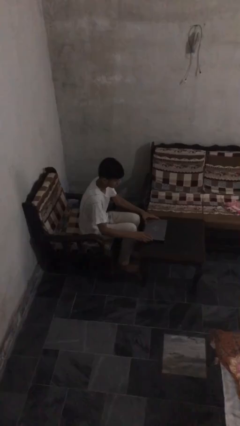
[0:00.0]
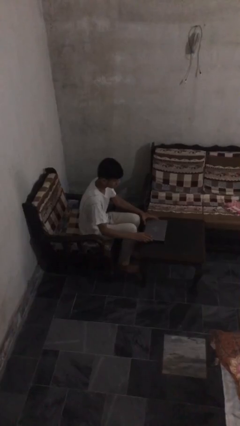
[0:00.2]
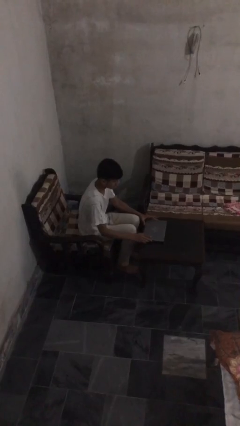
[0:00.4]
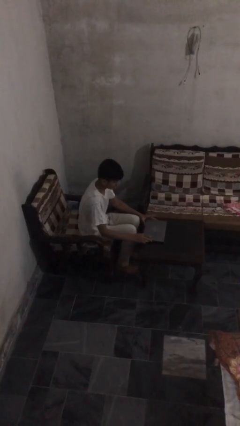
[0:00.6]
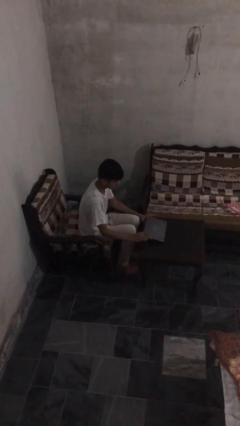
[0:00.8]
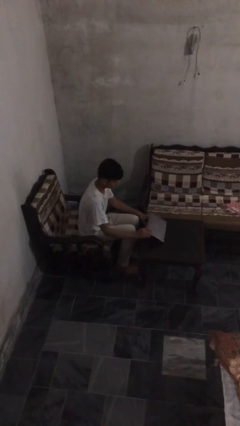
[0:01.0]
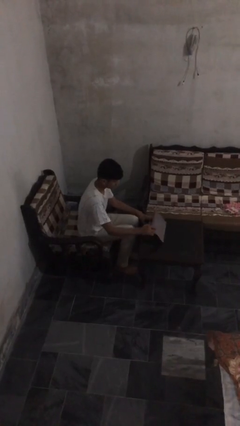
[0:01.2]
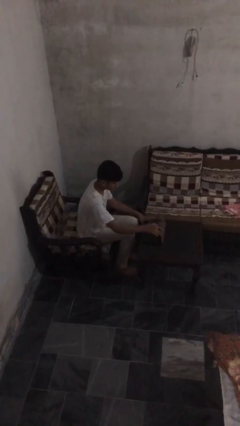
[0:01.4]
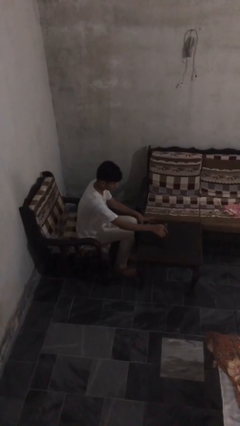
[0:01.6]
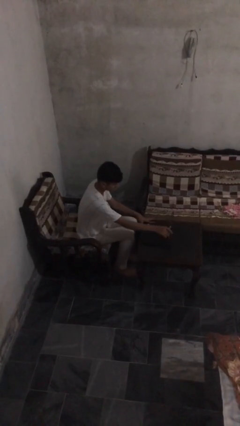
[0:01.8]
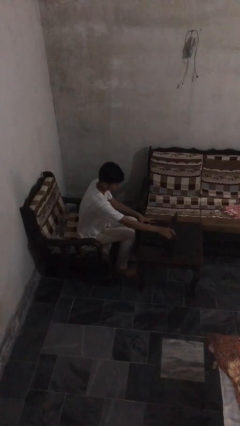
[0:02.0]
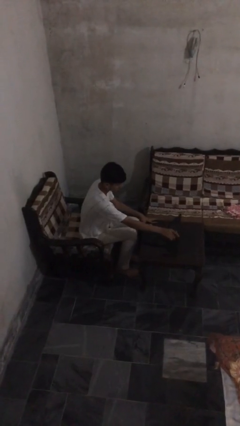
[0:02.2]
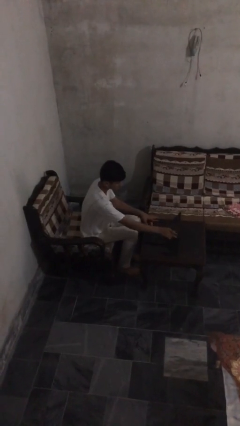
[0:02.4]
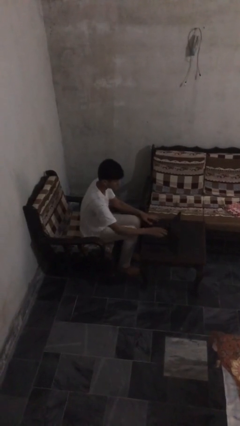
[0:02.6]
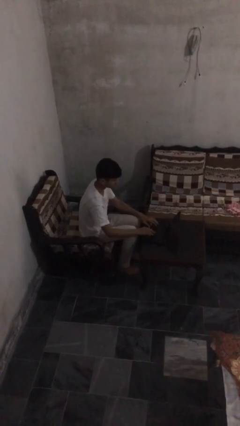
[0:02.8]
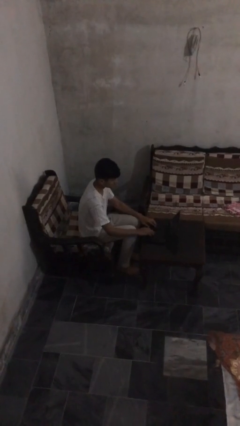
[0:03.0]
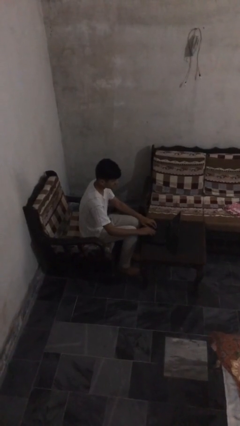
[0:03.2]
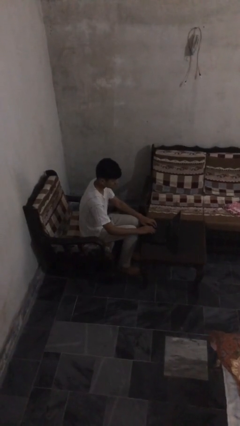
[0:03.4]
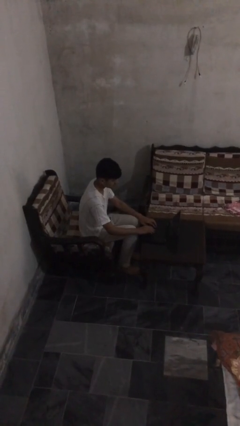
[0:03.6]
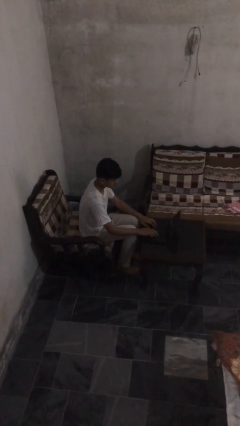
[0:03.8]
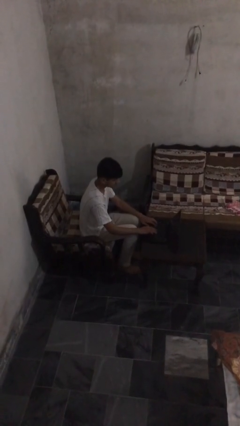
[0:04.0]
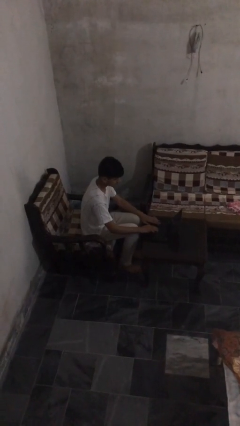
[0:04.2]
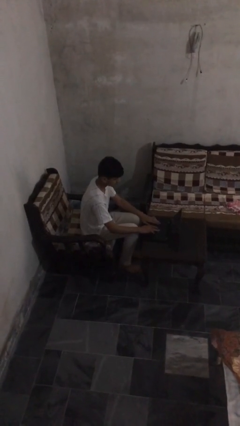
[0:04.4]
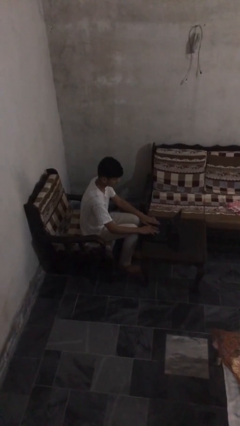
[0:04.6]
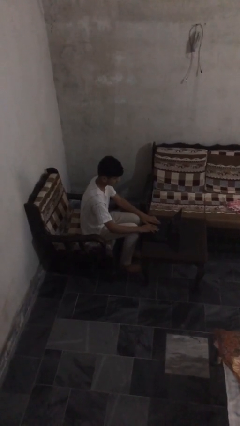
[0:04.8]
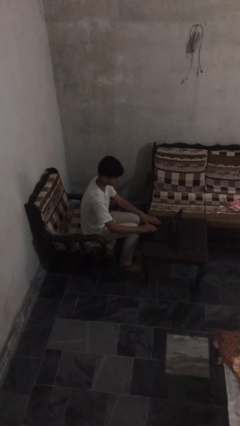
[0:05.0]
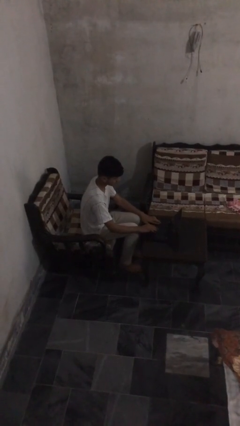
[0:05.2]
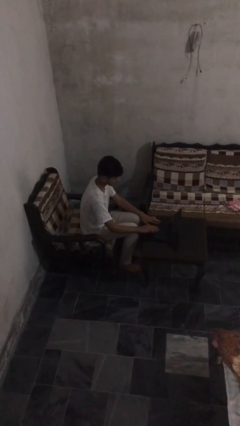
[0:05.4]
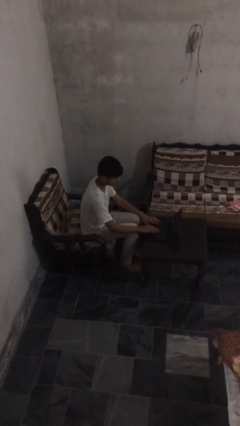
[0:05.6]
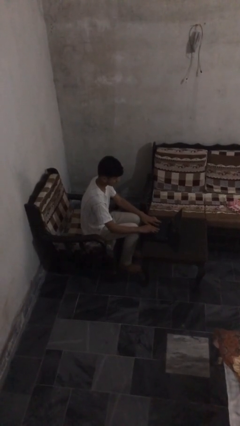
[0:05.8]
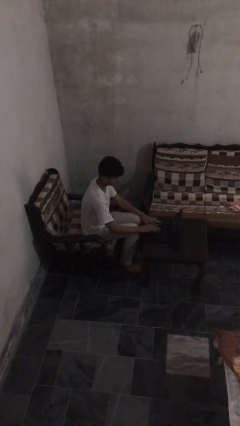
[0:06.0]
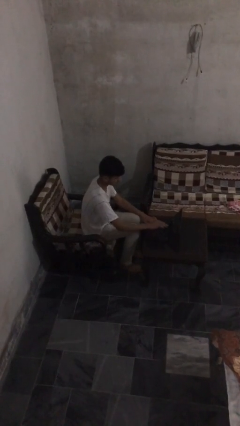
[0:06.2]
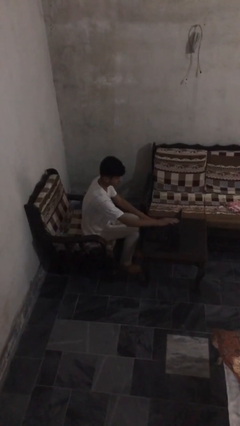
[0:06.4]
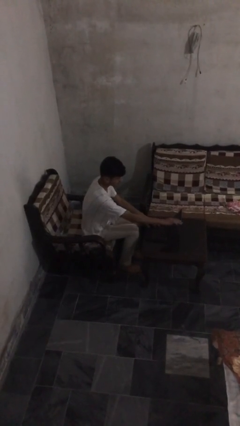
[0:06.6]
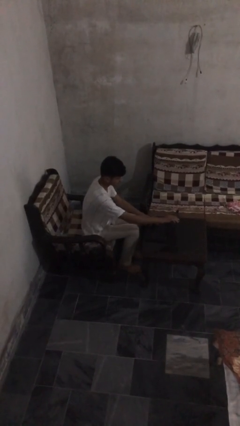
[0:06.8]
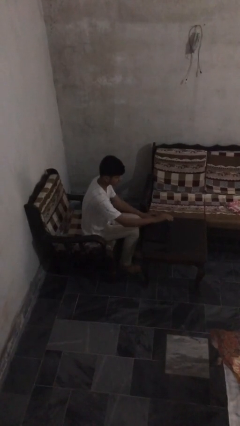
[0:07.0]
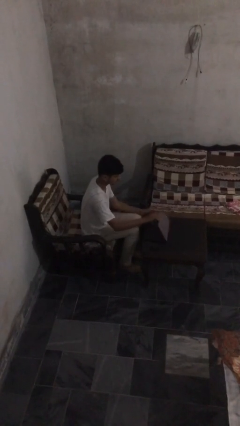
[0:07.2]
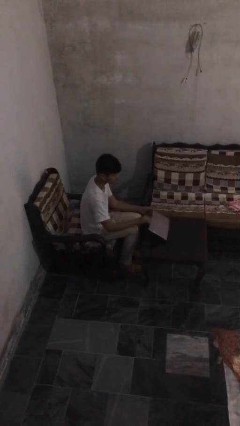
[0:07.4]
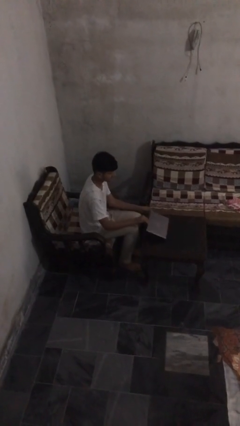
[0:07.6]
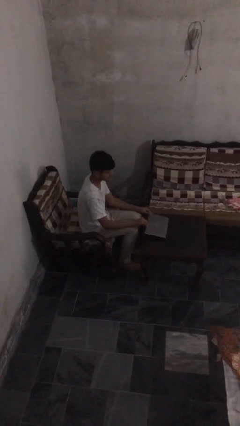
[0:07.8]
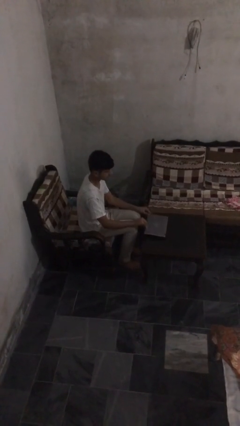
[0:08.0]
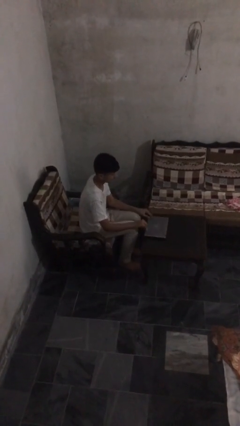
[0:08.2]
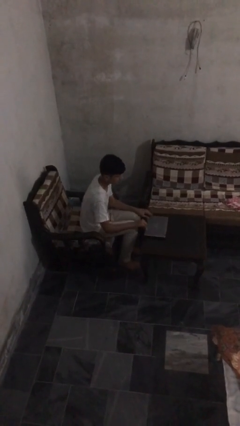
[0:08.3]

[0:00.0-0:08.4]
person interacts with laptop

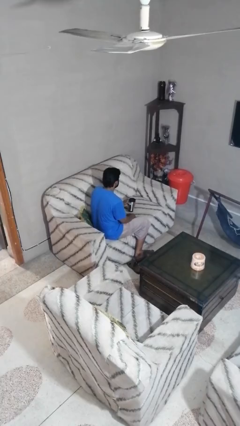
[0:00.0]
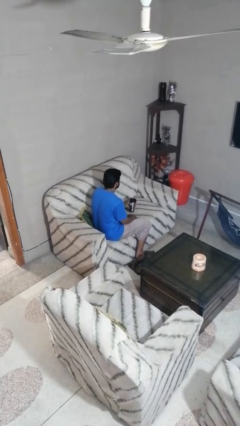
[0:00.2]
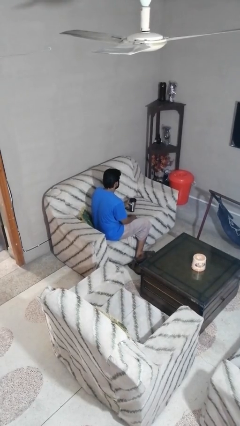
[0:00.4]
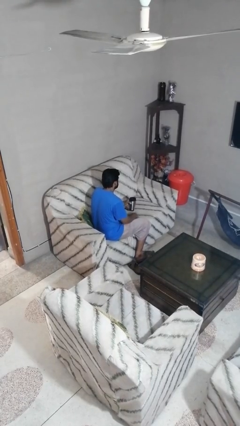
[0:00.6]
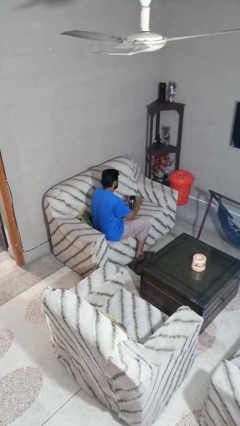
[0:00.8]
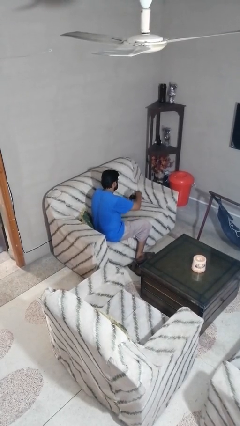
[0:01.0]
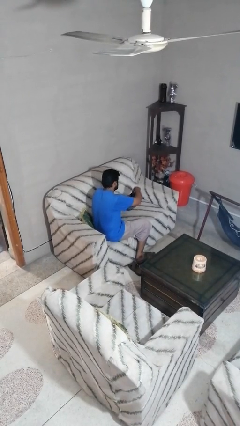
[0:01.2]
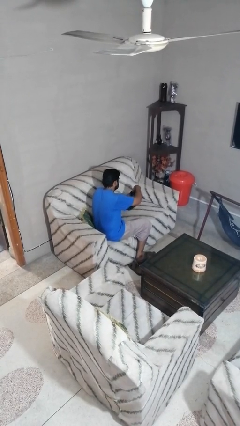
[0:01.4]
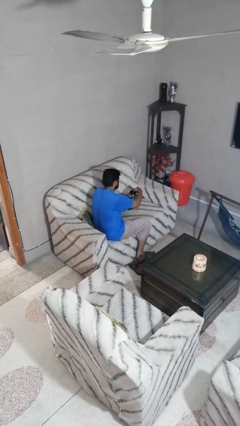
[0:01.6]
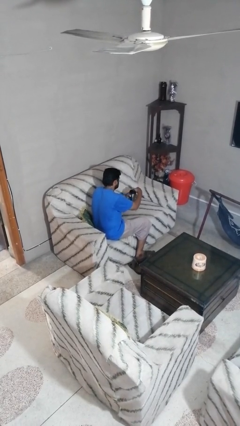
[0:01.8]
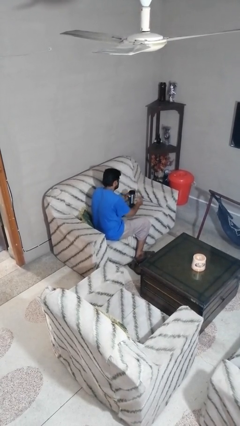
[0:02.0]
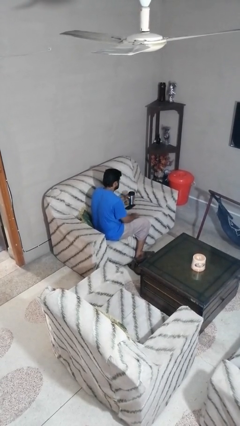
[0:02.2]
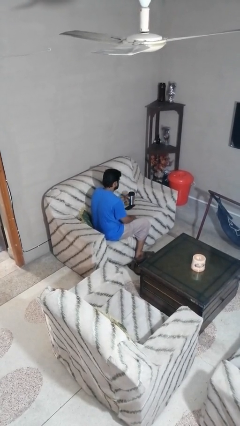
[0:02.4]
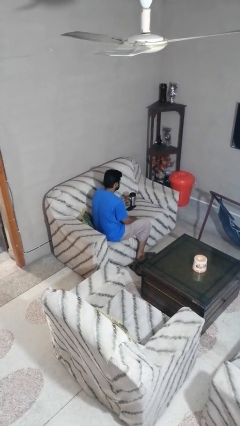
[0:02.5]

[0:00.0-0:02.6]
person opens beverage can

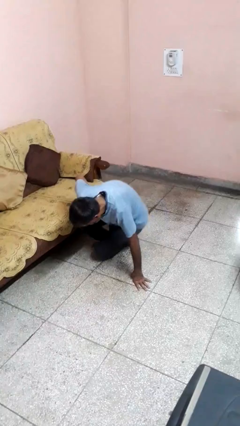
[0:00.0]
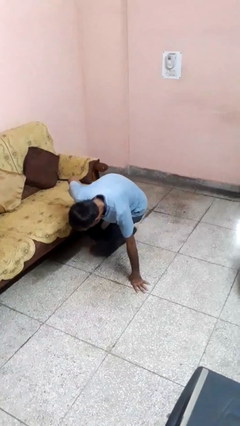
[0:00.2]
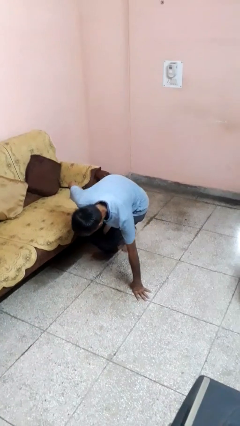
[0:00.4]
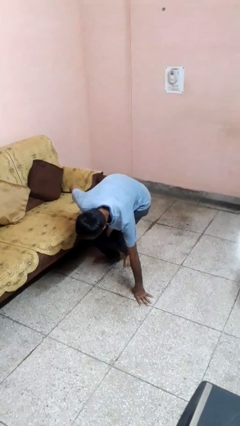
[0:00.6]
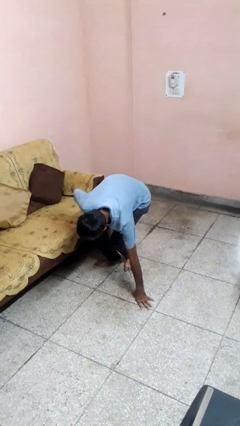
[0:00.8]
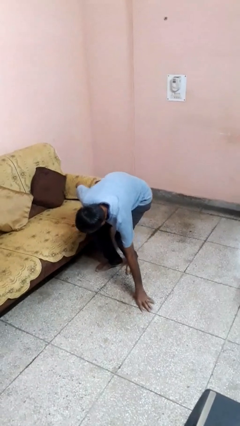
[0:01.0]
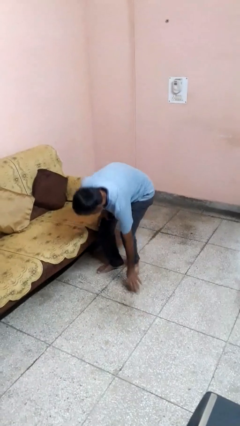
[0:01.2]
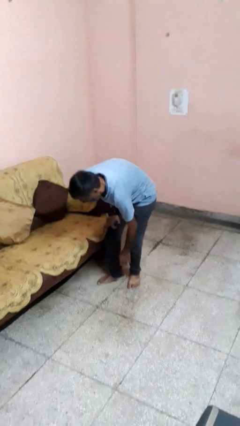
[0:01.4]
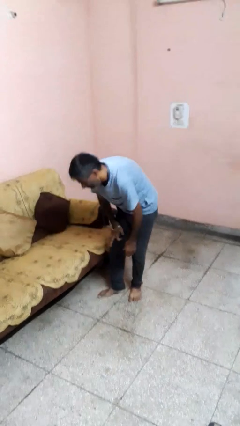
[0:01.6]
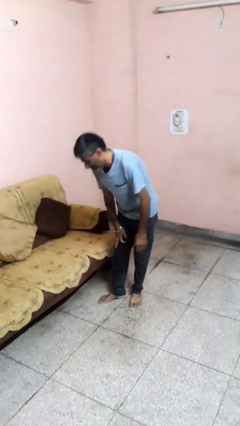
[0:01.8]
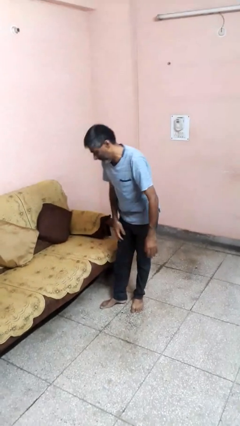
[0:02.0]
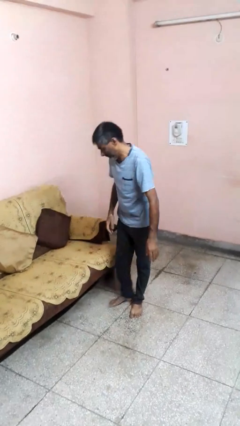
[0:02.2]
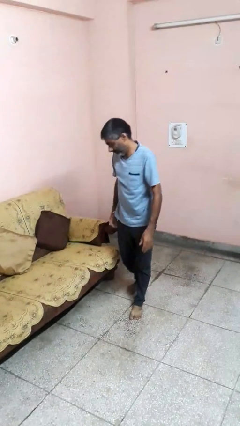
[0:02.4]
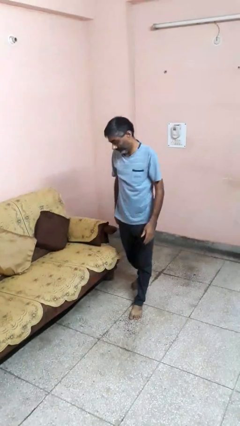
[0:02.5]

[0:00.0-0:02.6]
person stands up from floor

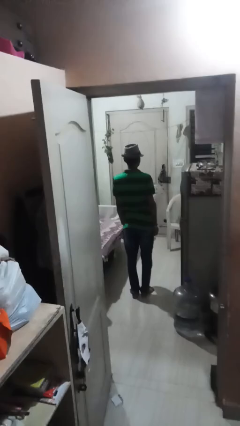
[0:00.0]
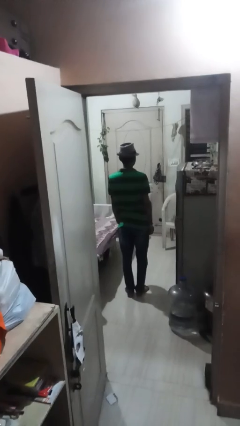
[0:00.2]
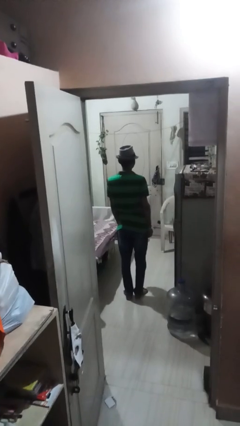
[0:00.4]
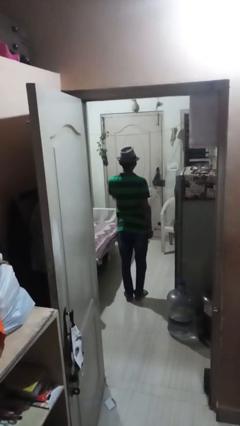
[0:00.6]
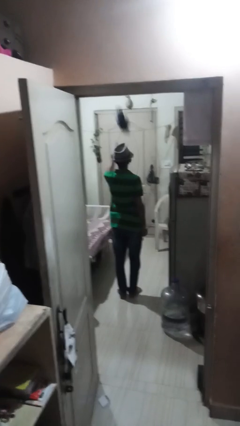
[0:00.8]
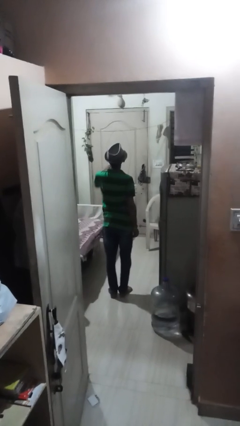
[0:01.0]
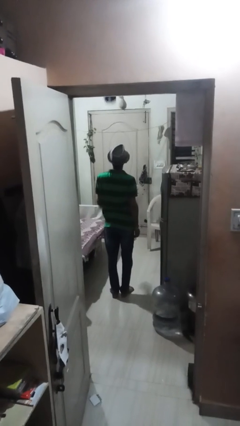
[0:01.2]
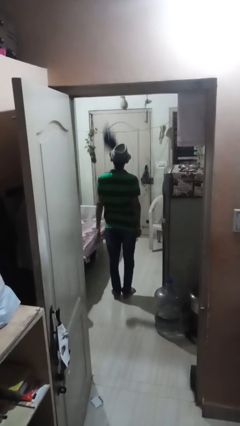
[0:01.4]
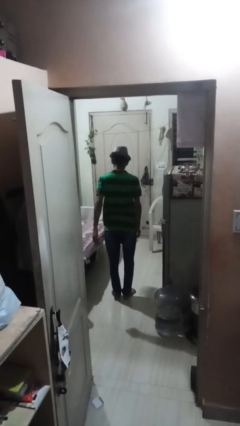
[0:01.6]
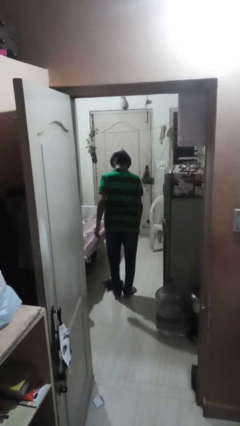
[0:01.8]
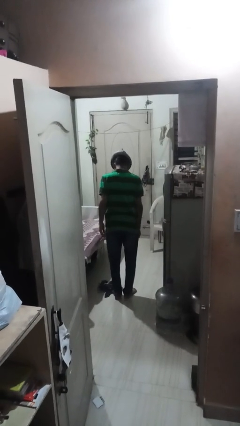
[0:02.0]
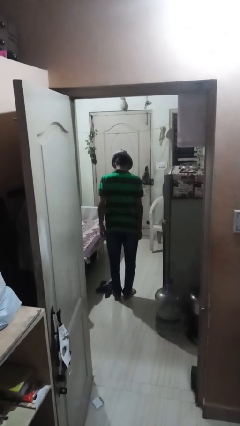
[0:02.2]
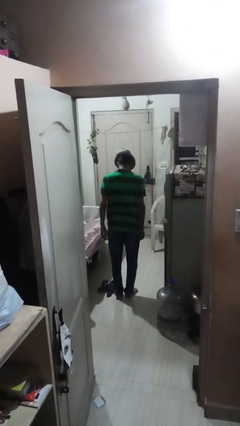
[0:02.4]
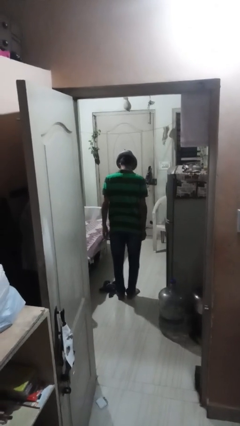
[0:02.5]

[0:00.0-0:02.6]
person throws object into air

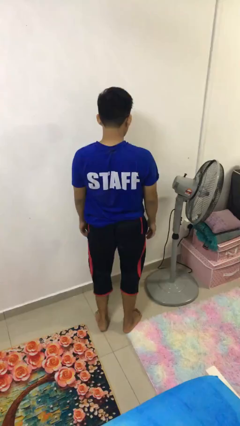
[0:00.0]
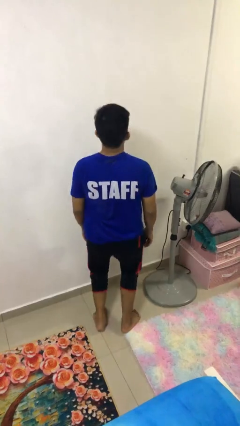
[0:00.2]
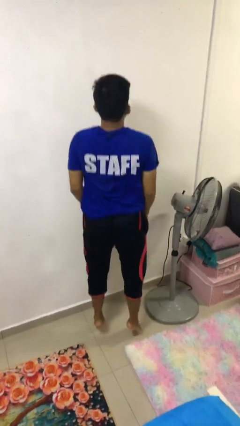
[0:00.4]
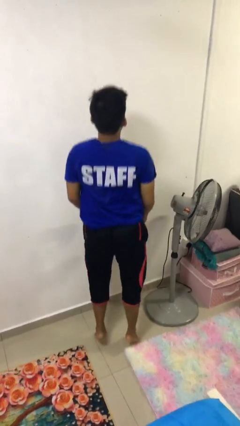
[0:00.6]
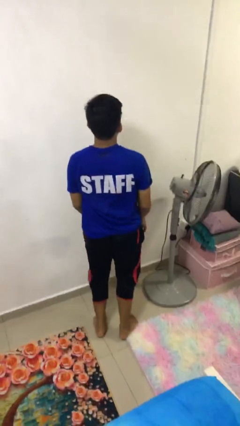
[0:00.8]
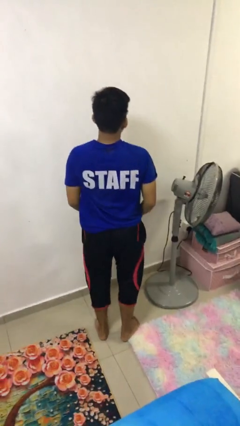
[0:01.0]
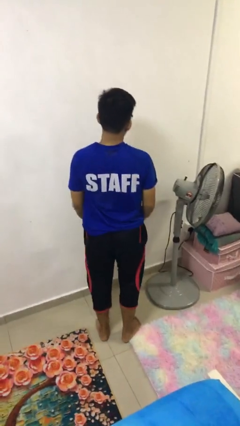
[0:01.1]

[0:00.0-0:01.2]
person jumps

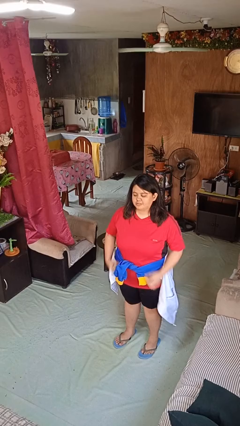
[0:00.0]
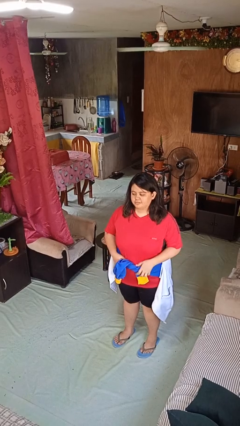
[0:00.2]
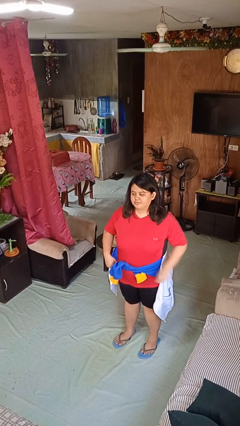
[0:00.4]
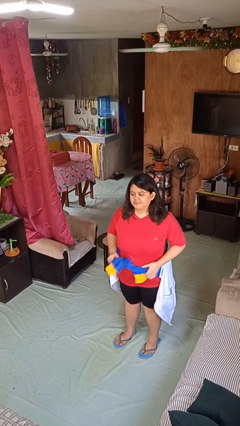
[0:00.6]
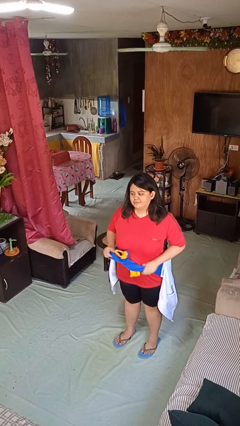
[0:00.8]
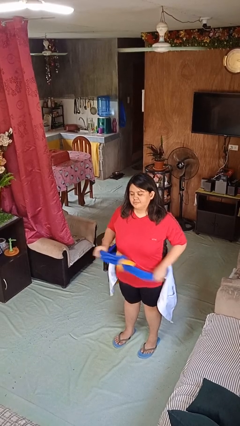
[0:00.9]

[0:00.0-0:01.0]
person unties jacket around waist
